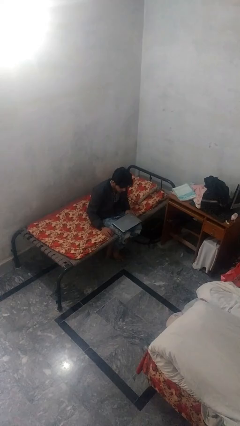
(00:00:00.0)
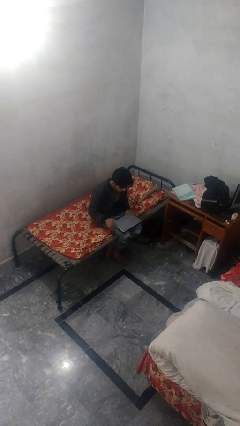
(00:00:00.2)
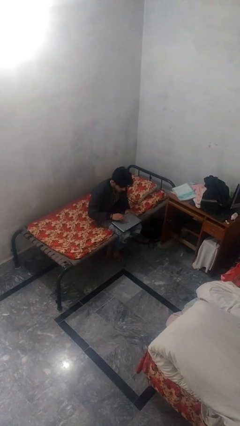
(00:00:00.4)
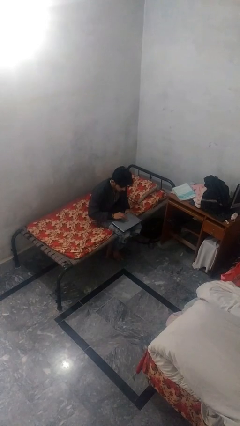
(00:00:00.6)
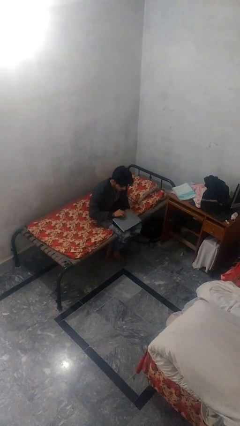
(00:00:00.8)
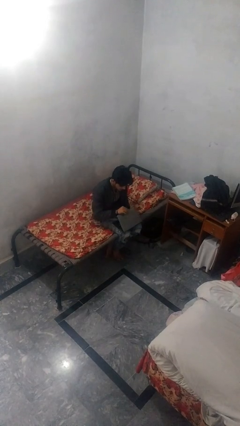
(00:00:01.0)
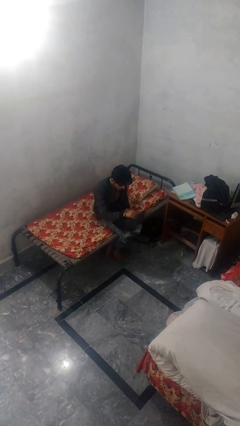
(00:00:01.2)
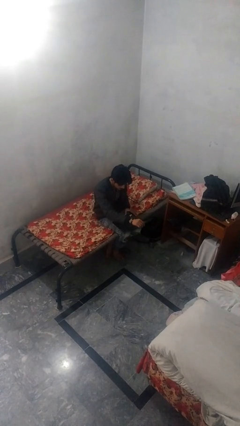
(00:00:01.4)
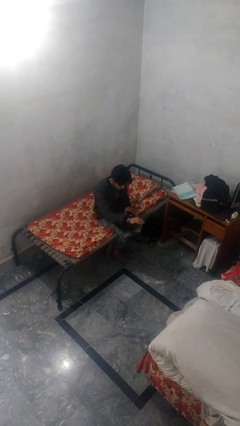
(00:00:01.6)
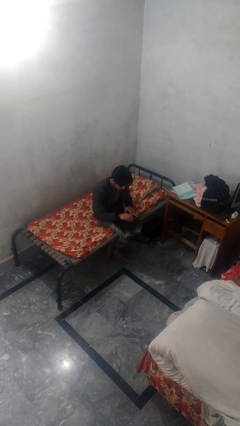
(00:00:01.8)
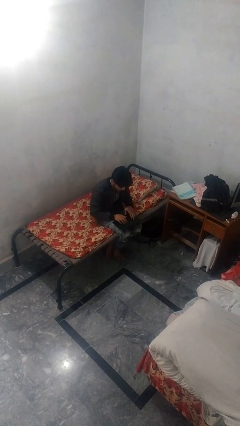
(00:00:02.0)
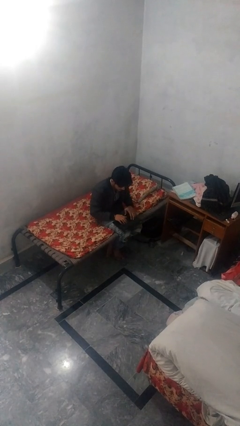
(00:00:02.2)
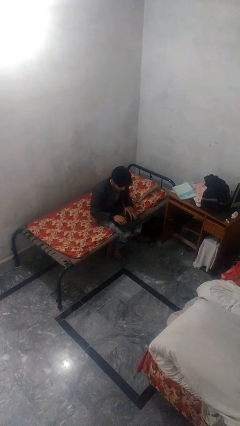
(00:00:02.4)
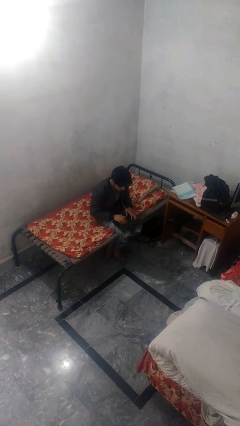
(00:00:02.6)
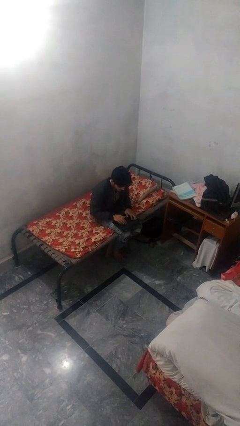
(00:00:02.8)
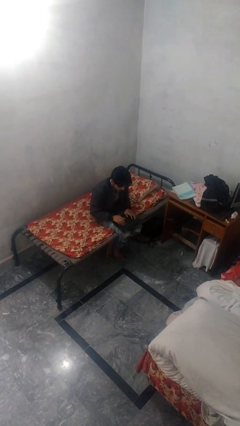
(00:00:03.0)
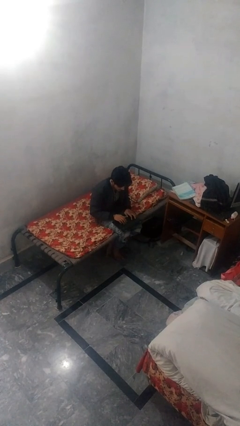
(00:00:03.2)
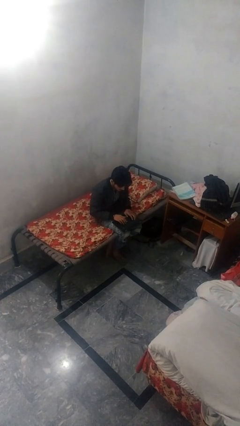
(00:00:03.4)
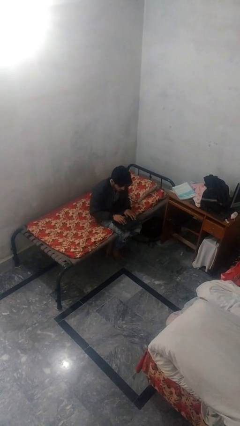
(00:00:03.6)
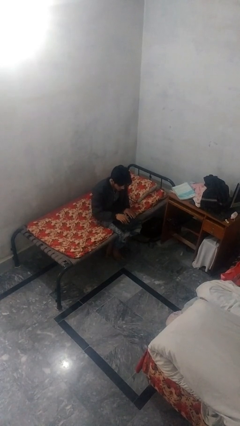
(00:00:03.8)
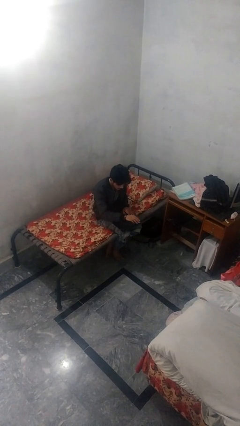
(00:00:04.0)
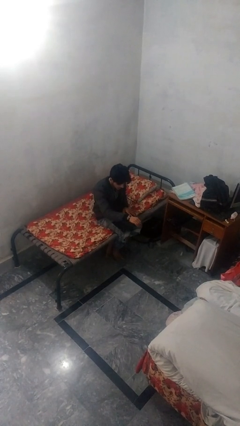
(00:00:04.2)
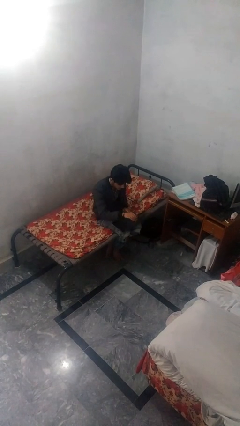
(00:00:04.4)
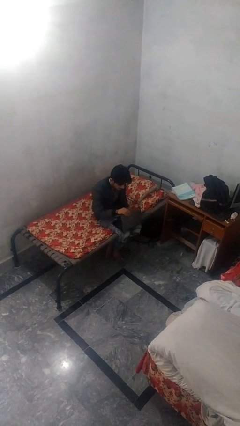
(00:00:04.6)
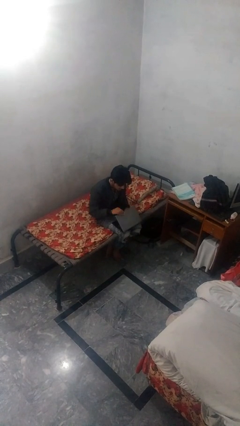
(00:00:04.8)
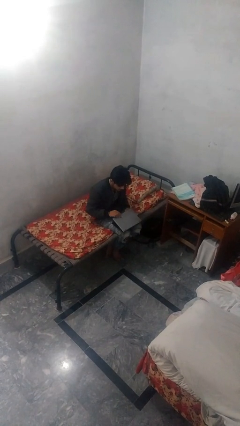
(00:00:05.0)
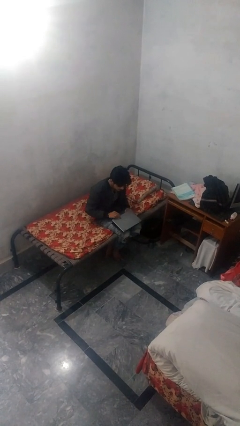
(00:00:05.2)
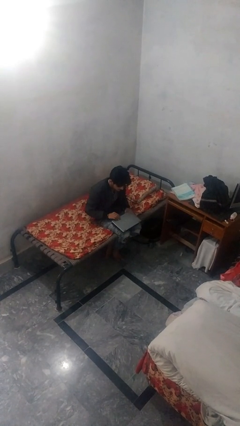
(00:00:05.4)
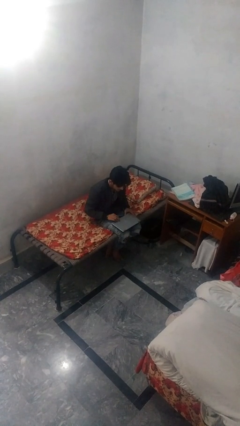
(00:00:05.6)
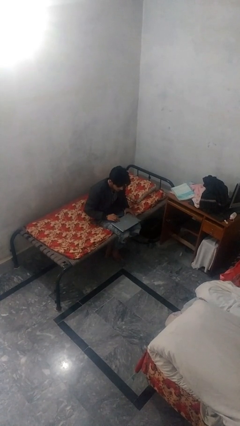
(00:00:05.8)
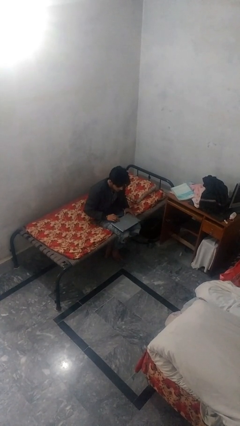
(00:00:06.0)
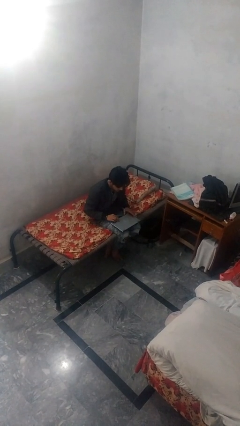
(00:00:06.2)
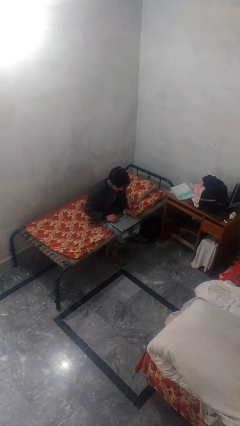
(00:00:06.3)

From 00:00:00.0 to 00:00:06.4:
person interacts with laptop

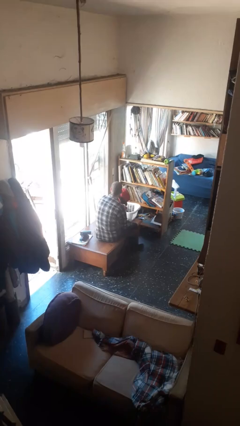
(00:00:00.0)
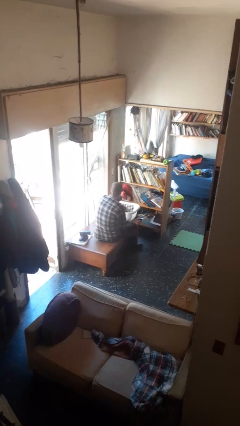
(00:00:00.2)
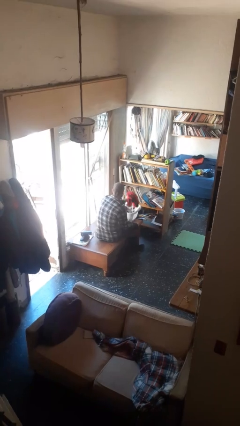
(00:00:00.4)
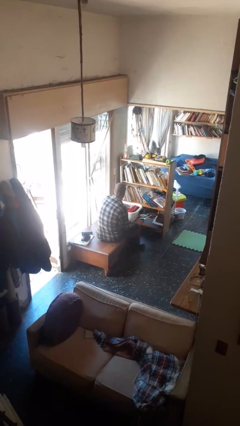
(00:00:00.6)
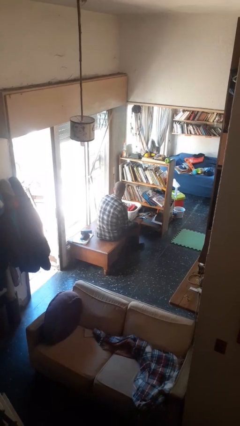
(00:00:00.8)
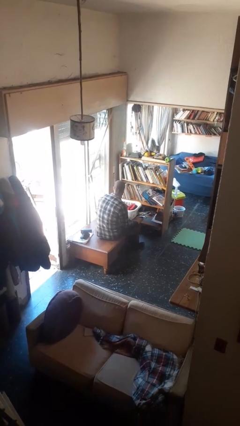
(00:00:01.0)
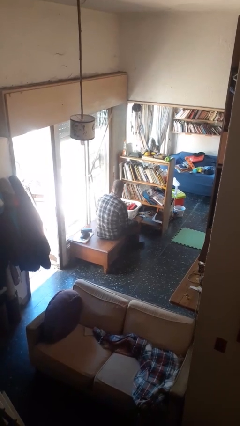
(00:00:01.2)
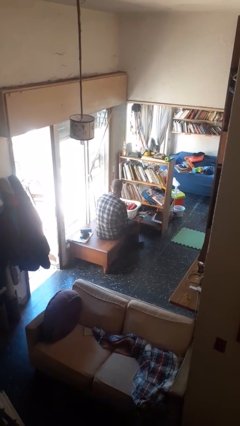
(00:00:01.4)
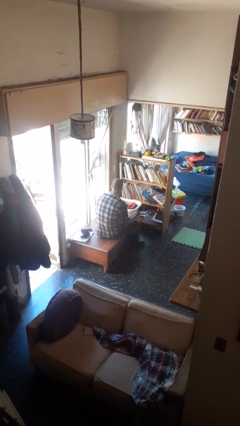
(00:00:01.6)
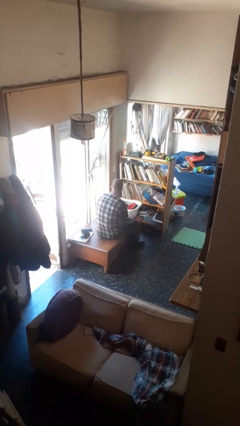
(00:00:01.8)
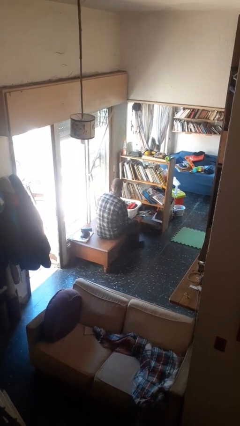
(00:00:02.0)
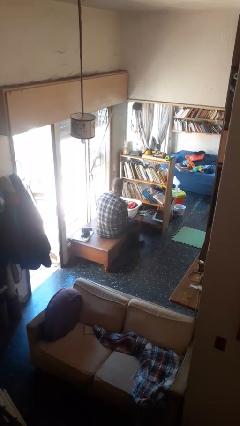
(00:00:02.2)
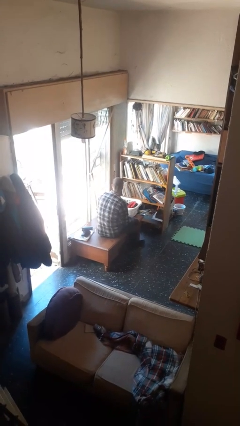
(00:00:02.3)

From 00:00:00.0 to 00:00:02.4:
person puts object into basket

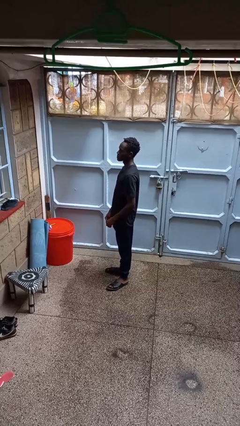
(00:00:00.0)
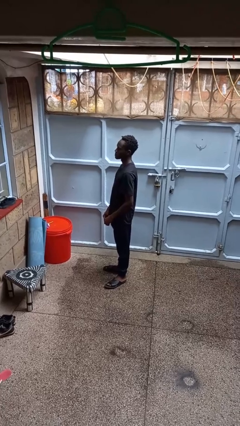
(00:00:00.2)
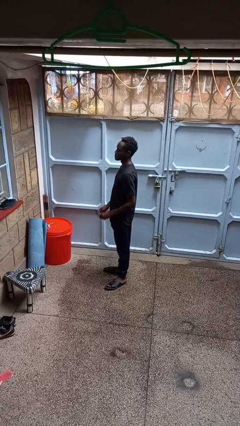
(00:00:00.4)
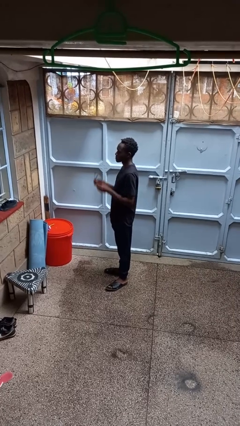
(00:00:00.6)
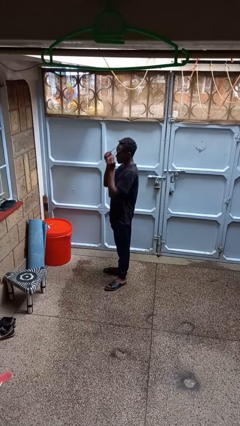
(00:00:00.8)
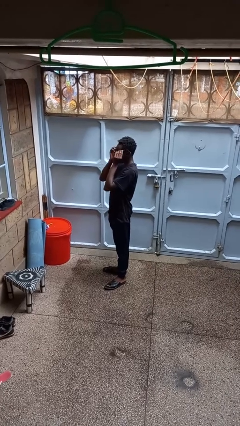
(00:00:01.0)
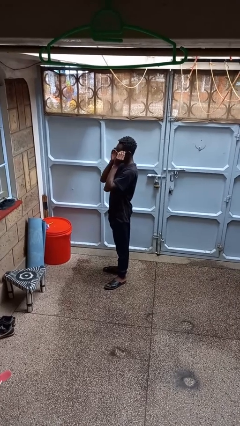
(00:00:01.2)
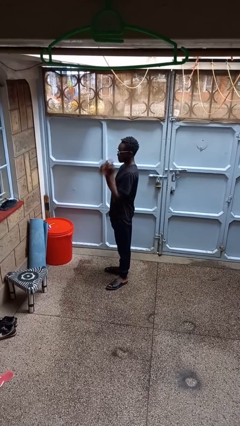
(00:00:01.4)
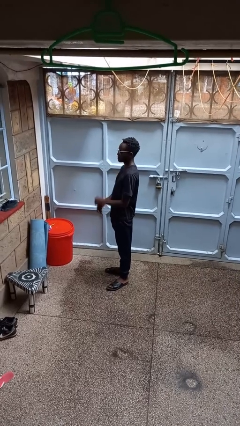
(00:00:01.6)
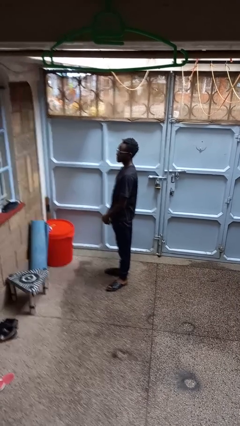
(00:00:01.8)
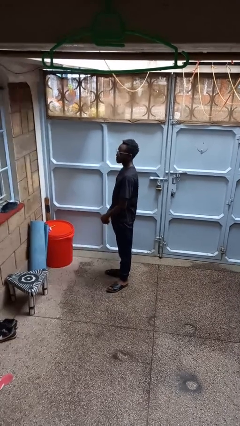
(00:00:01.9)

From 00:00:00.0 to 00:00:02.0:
person puts on glasses

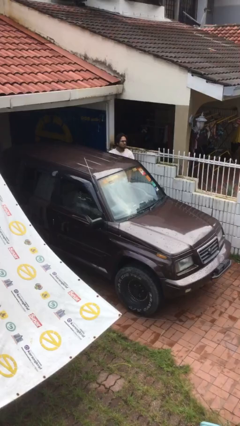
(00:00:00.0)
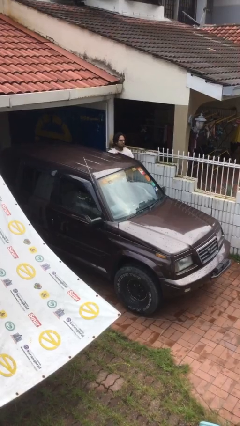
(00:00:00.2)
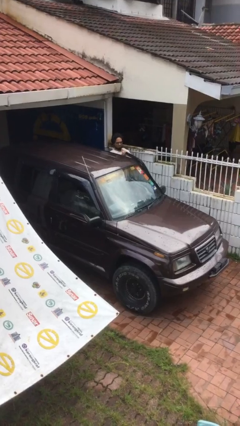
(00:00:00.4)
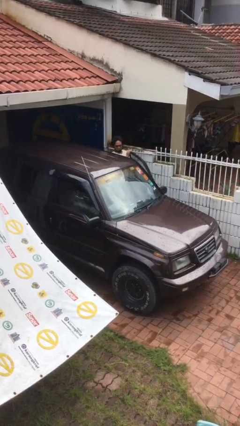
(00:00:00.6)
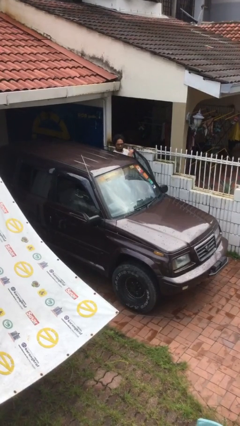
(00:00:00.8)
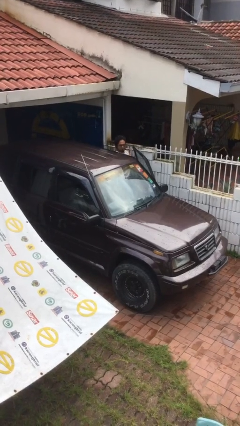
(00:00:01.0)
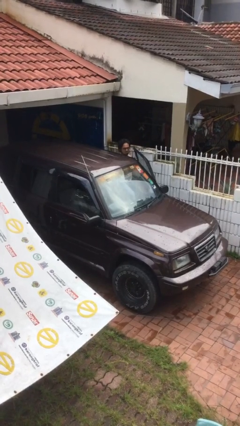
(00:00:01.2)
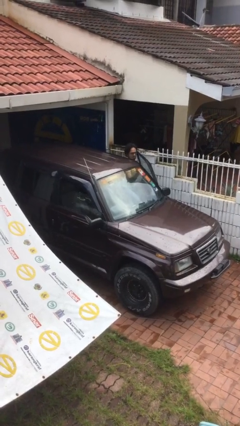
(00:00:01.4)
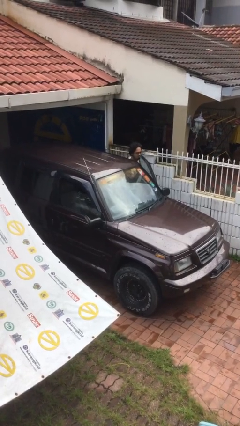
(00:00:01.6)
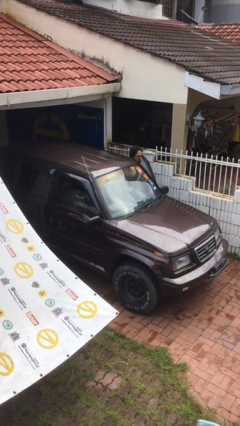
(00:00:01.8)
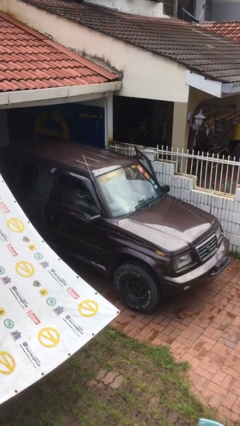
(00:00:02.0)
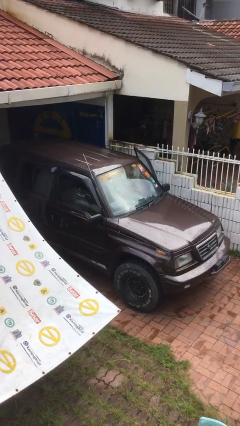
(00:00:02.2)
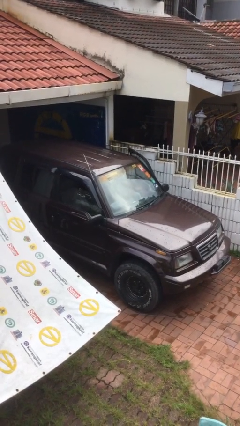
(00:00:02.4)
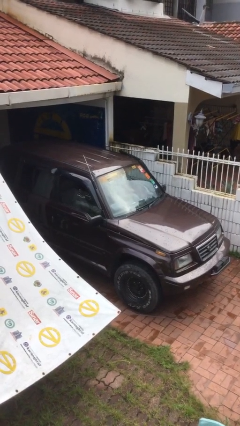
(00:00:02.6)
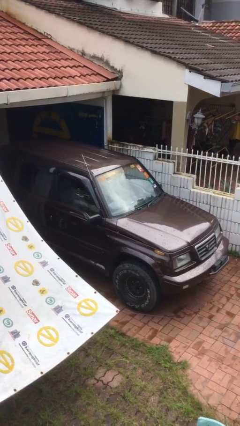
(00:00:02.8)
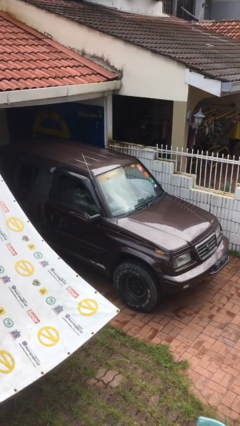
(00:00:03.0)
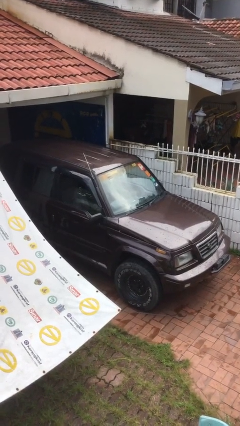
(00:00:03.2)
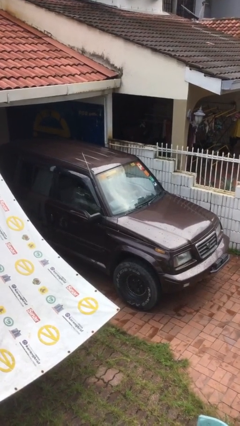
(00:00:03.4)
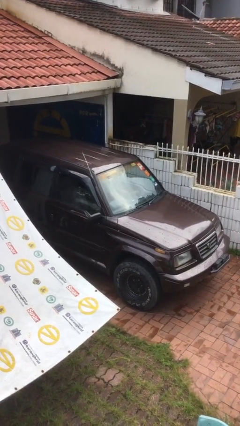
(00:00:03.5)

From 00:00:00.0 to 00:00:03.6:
car picks up person

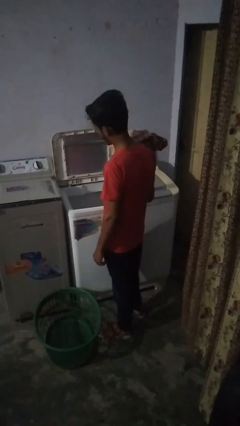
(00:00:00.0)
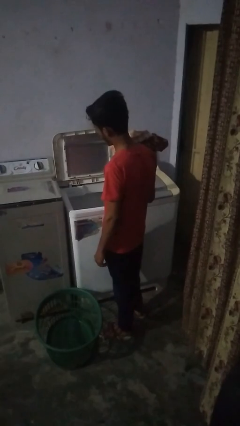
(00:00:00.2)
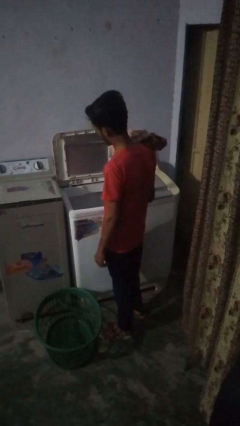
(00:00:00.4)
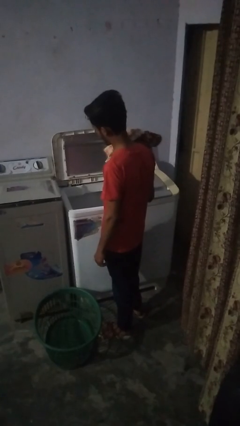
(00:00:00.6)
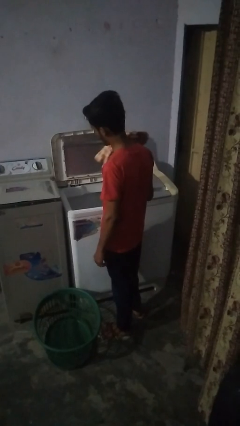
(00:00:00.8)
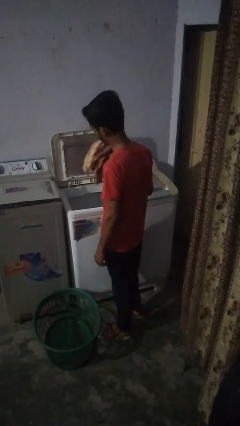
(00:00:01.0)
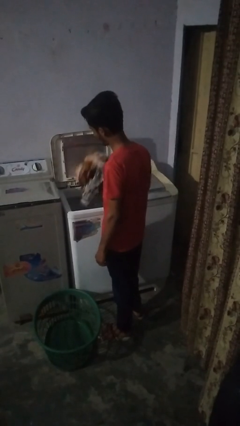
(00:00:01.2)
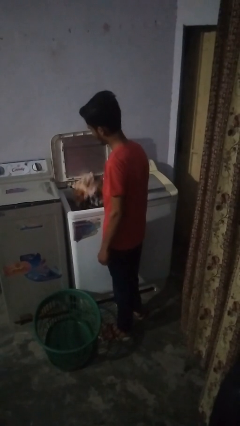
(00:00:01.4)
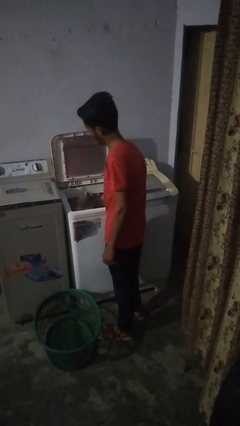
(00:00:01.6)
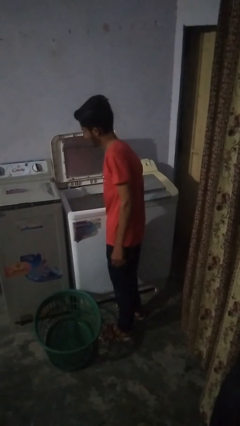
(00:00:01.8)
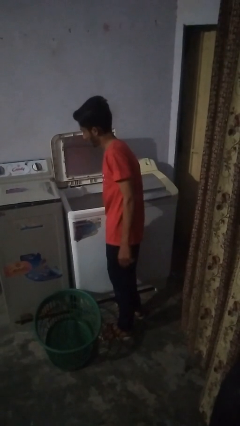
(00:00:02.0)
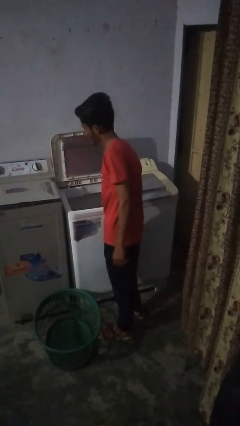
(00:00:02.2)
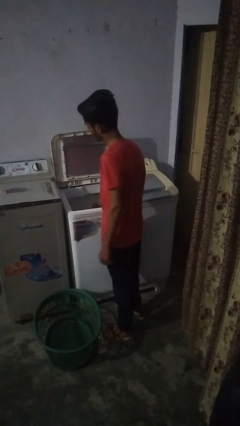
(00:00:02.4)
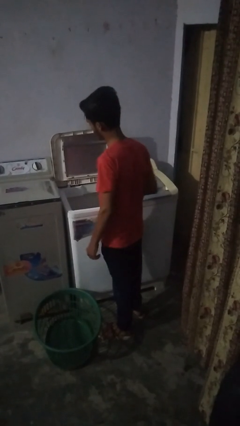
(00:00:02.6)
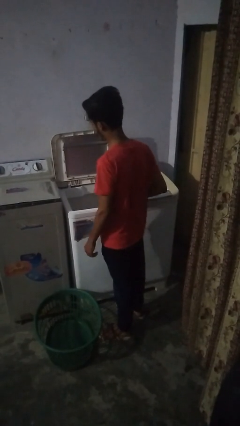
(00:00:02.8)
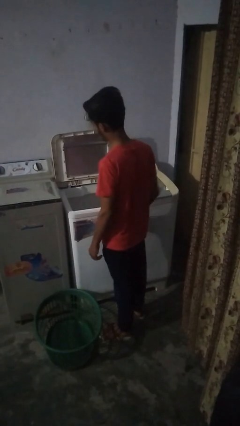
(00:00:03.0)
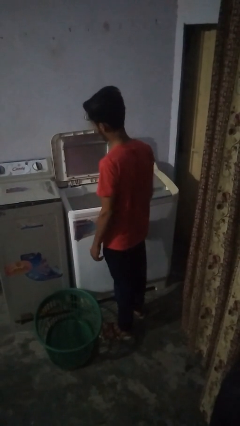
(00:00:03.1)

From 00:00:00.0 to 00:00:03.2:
person loads clotheswasher
